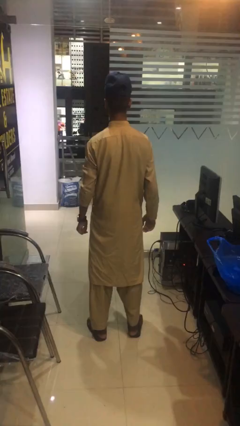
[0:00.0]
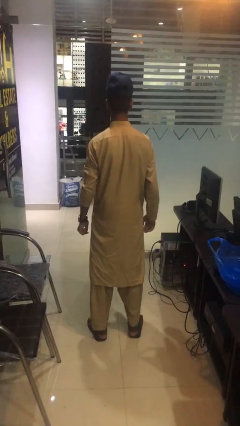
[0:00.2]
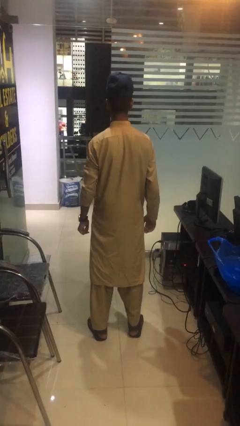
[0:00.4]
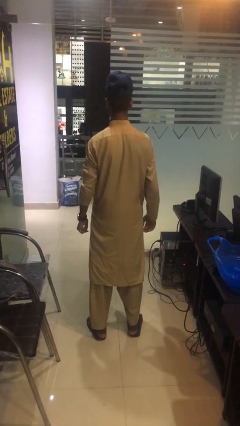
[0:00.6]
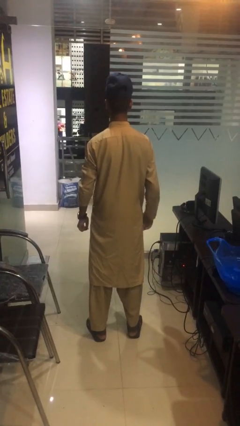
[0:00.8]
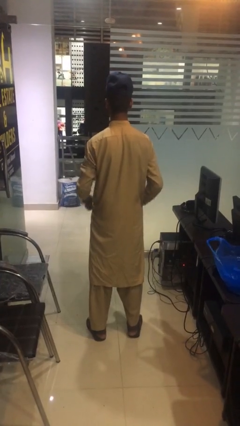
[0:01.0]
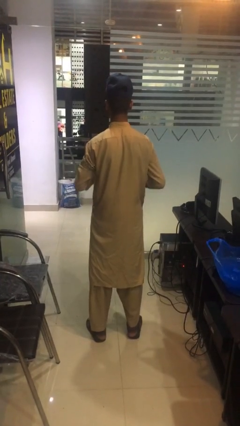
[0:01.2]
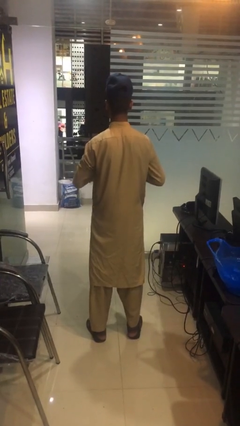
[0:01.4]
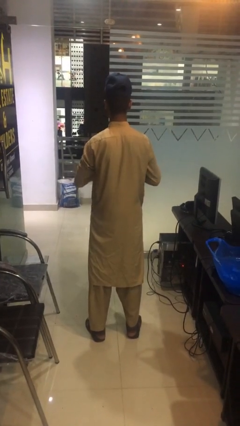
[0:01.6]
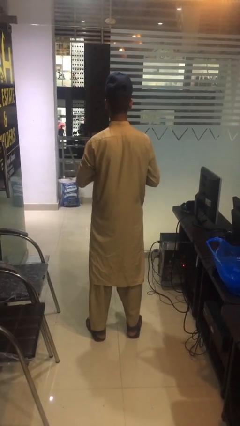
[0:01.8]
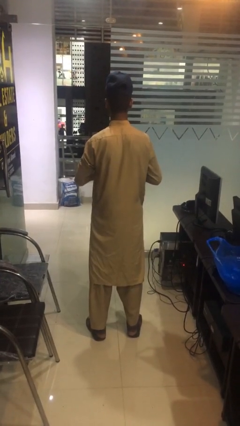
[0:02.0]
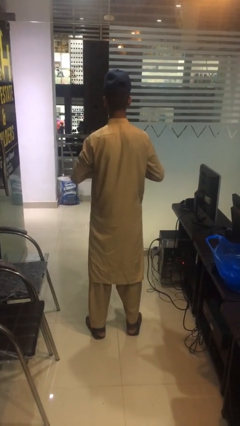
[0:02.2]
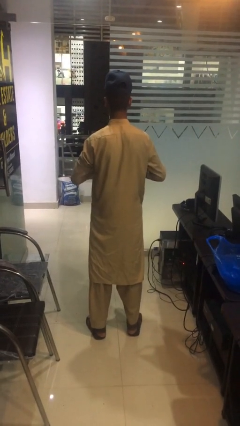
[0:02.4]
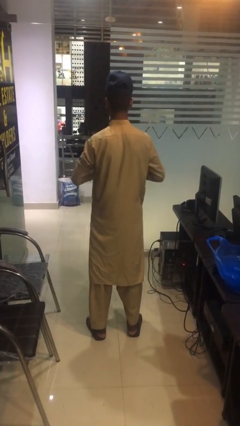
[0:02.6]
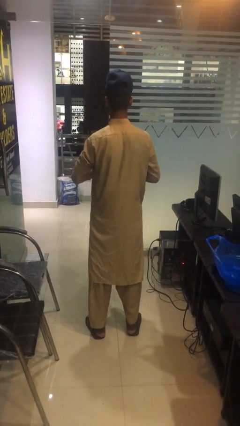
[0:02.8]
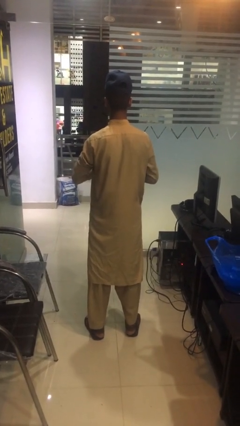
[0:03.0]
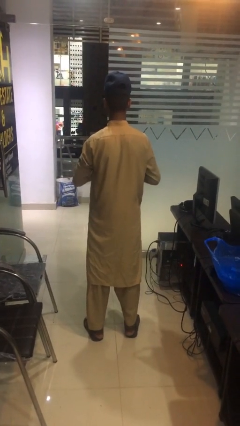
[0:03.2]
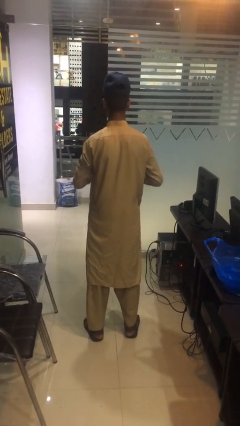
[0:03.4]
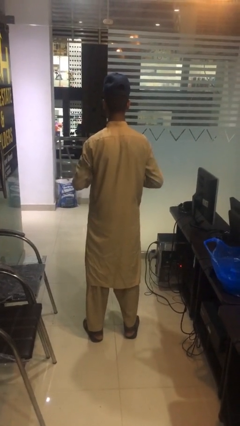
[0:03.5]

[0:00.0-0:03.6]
person cracks knuckles

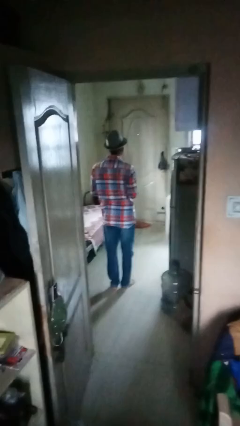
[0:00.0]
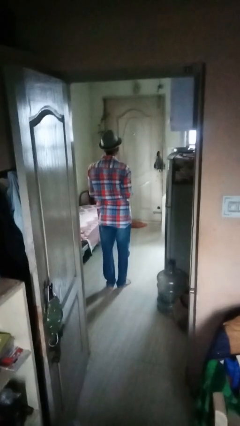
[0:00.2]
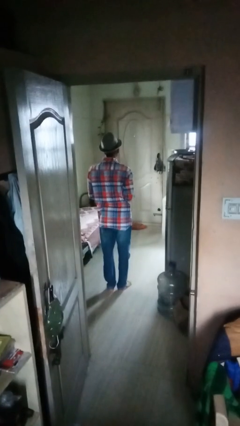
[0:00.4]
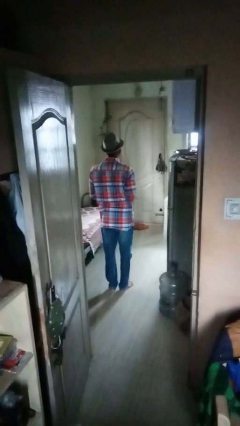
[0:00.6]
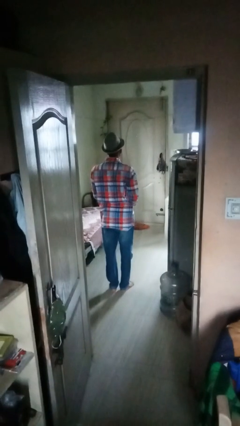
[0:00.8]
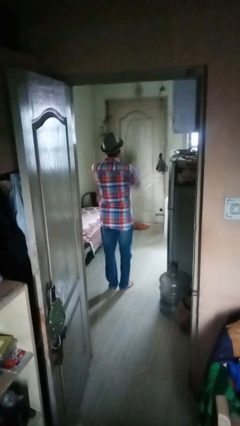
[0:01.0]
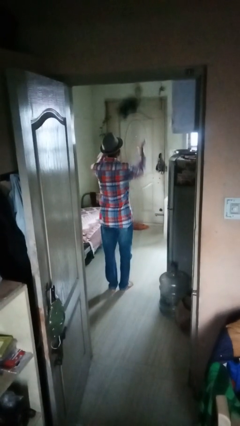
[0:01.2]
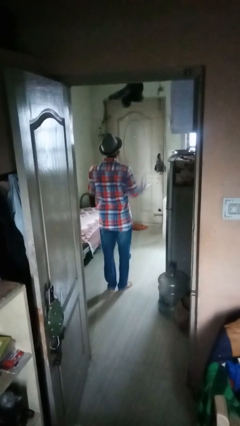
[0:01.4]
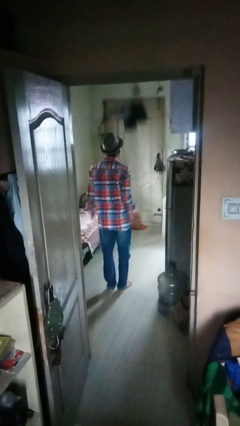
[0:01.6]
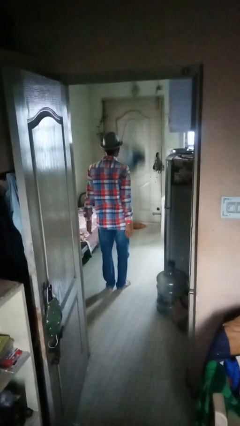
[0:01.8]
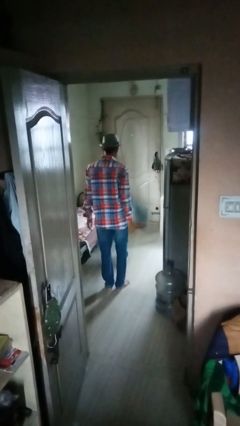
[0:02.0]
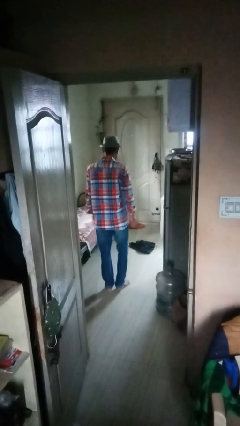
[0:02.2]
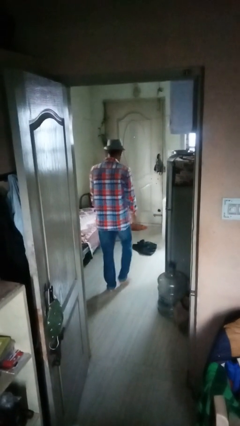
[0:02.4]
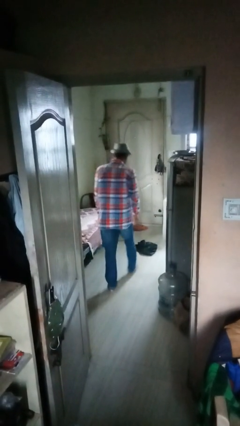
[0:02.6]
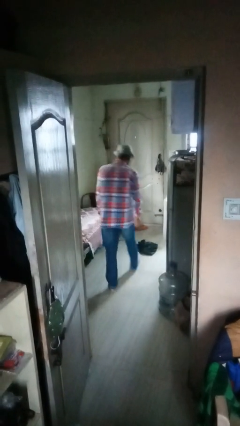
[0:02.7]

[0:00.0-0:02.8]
person throws object into air

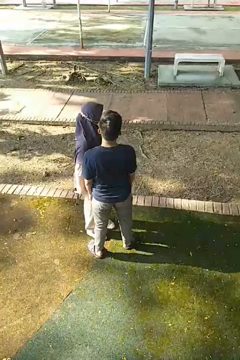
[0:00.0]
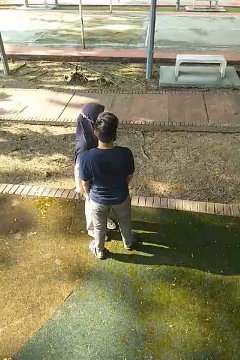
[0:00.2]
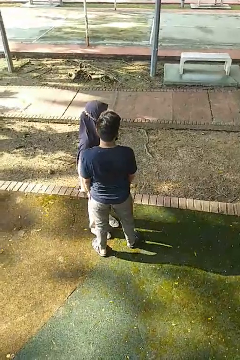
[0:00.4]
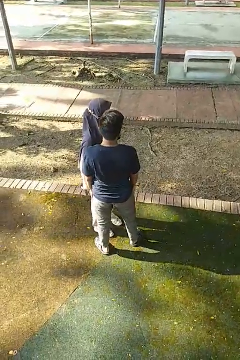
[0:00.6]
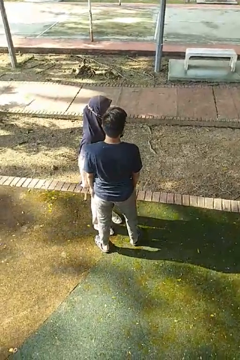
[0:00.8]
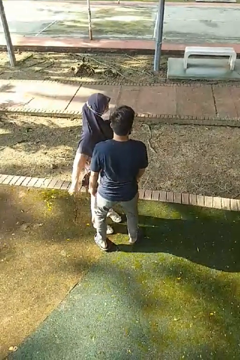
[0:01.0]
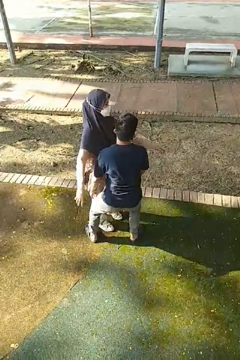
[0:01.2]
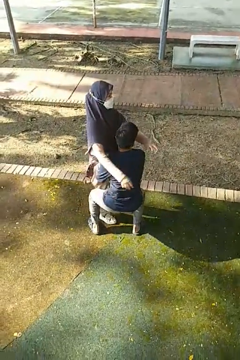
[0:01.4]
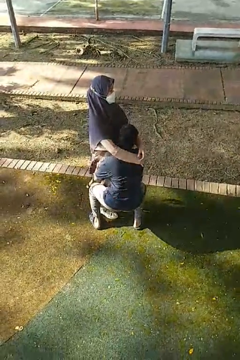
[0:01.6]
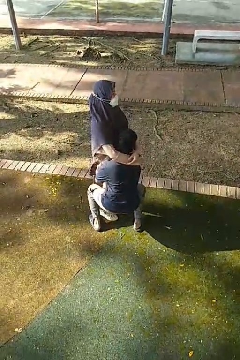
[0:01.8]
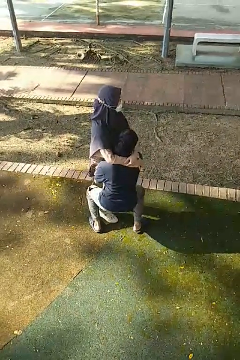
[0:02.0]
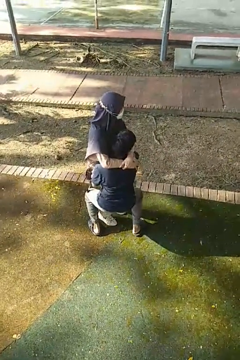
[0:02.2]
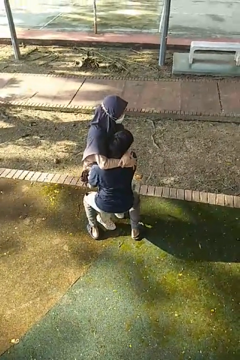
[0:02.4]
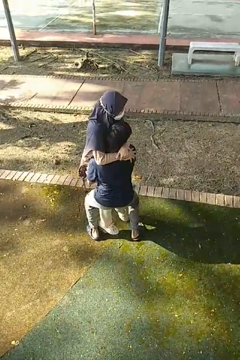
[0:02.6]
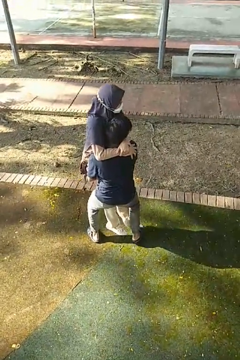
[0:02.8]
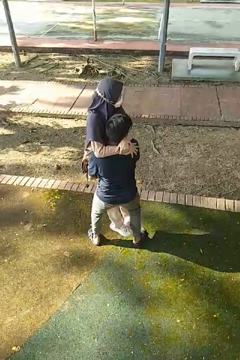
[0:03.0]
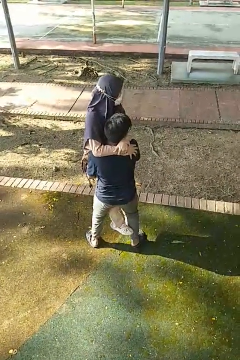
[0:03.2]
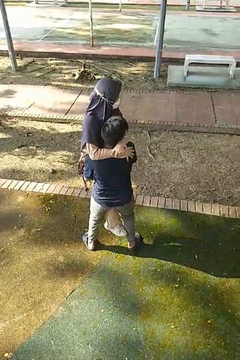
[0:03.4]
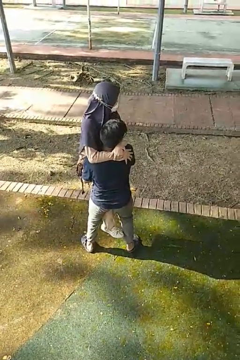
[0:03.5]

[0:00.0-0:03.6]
person picks up person

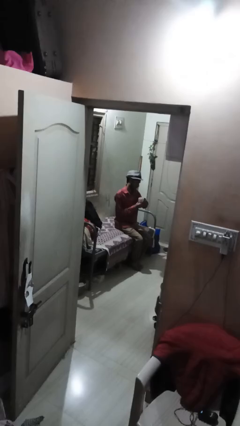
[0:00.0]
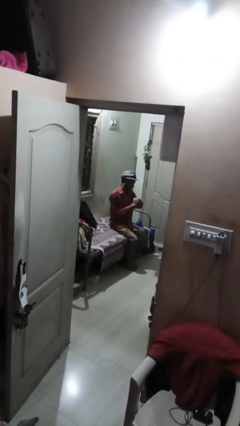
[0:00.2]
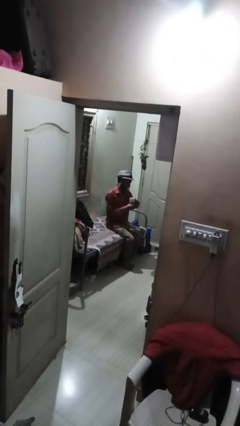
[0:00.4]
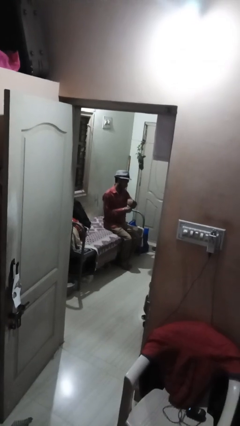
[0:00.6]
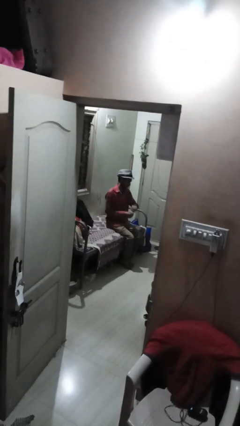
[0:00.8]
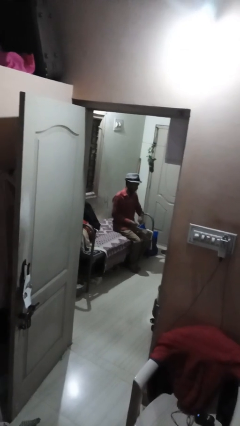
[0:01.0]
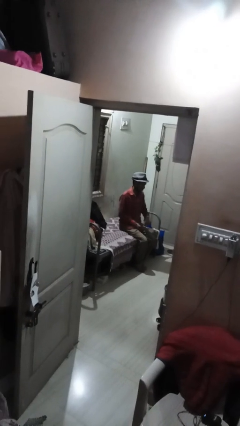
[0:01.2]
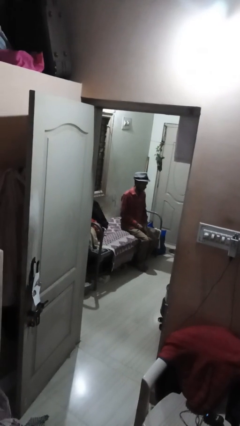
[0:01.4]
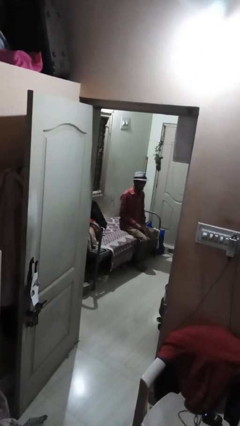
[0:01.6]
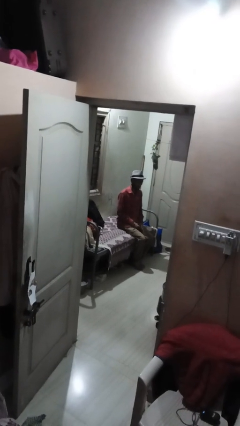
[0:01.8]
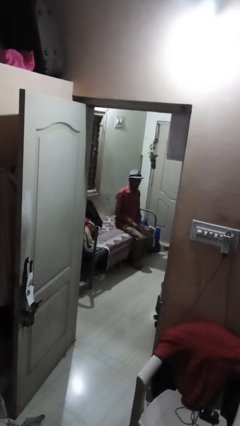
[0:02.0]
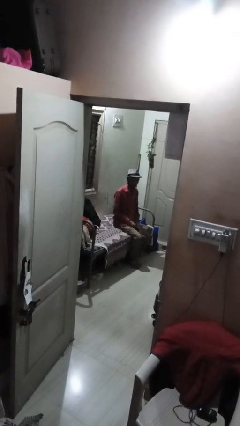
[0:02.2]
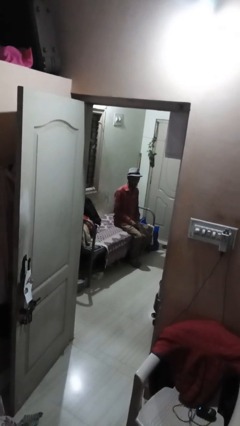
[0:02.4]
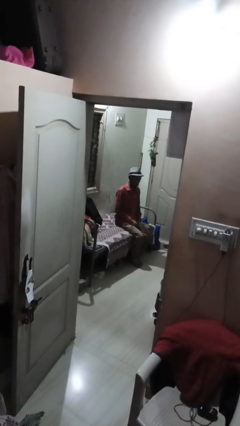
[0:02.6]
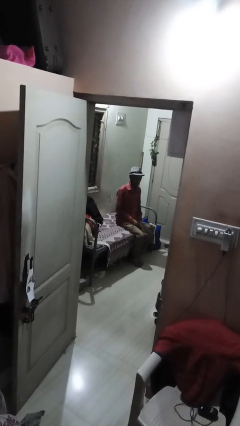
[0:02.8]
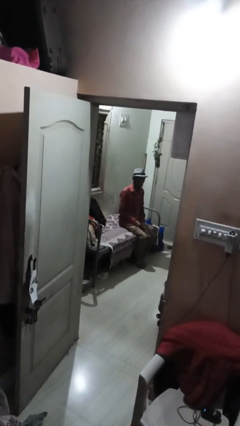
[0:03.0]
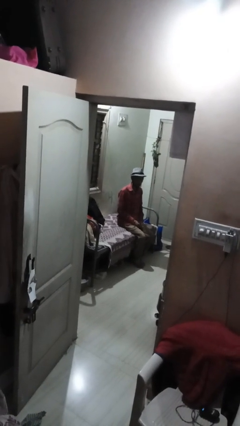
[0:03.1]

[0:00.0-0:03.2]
person looks at wristwatch

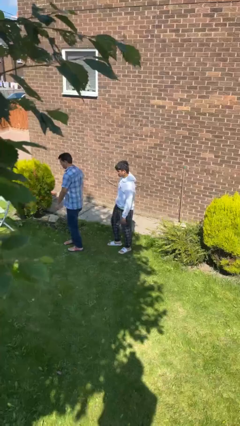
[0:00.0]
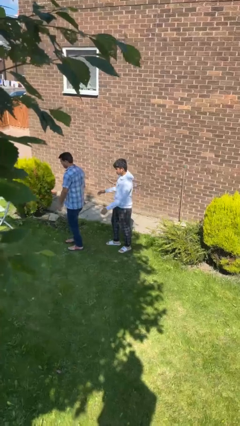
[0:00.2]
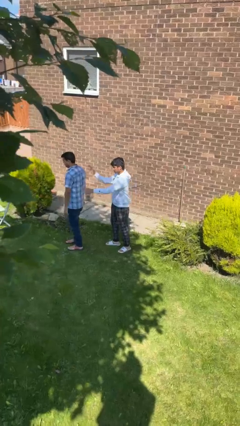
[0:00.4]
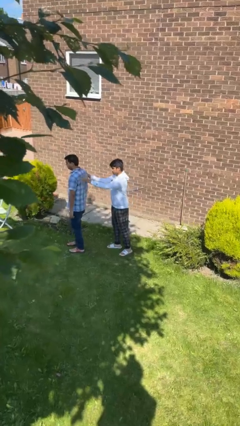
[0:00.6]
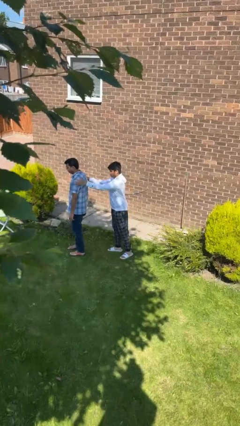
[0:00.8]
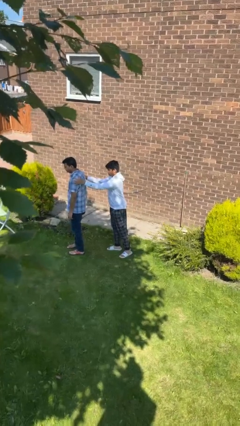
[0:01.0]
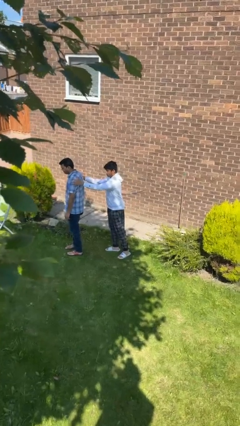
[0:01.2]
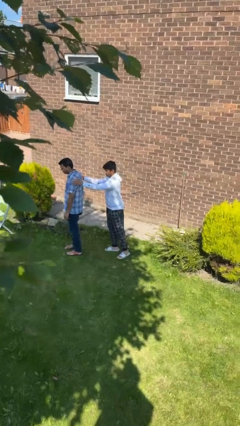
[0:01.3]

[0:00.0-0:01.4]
person grabs person by shoulder

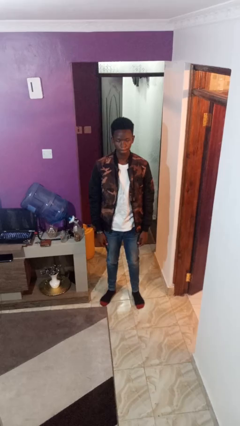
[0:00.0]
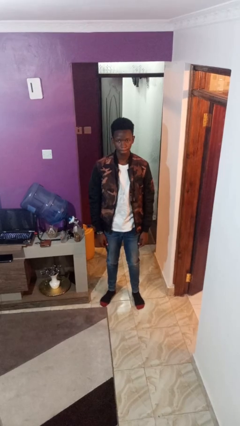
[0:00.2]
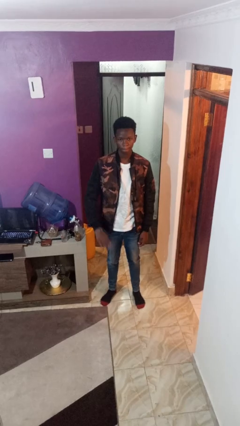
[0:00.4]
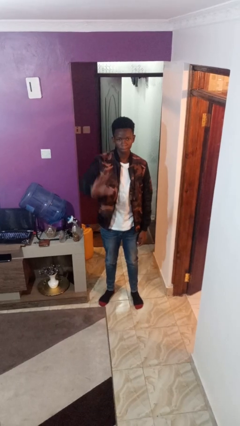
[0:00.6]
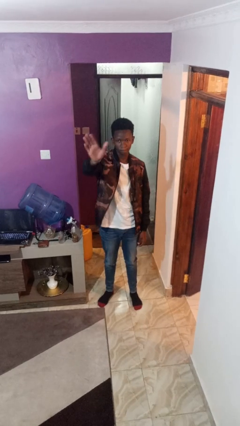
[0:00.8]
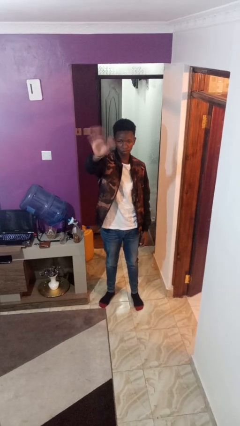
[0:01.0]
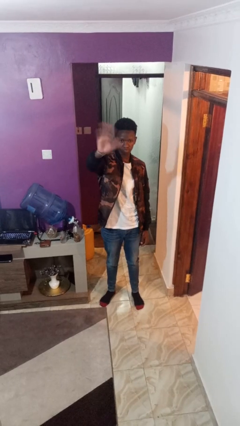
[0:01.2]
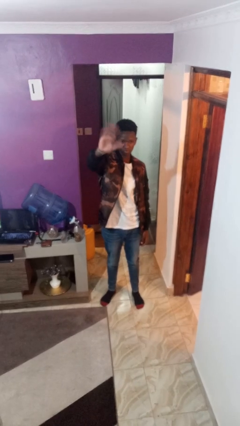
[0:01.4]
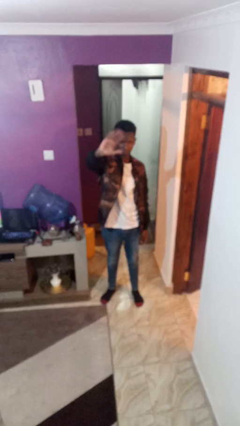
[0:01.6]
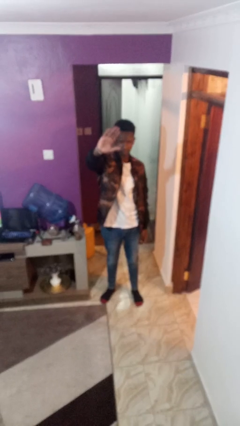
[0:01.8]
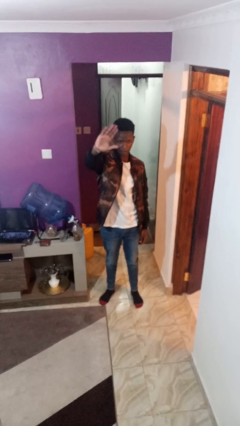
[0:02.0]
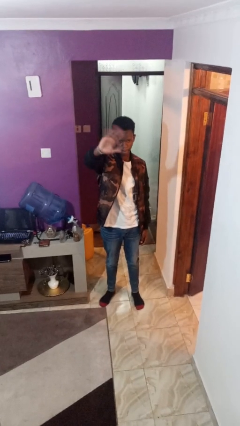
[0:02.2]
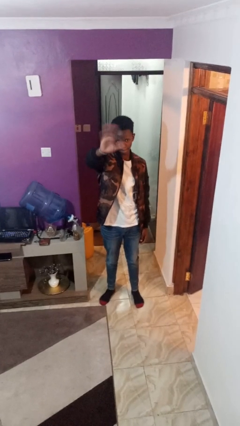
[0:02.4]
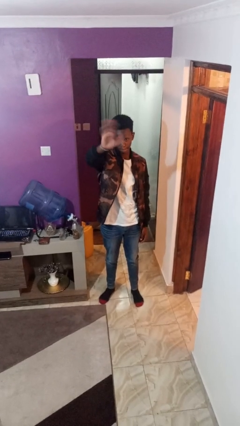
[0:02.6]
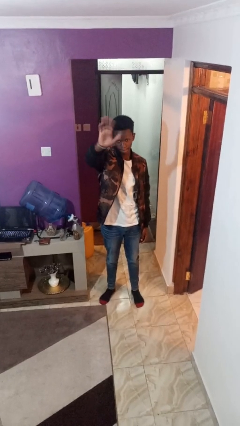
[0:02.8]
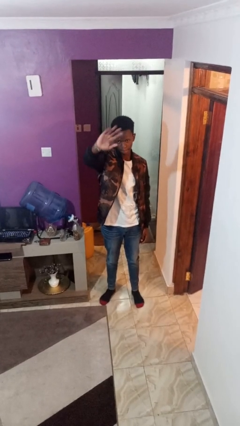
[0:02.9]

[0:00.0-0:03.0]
person waves at person

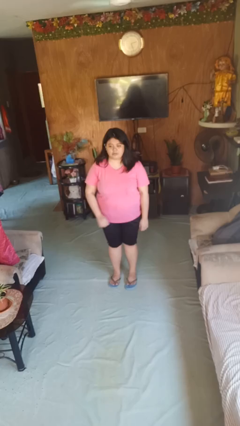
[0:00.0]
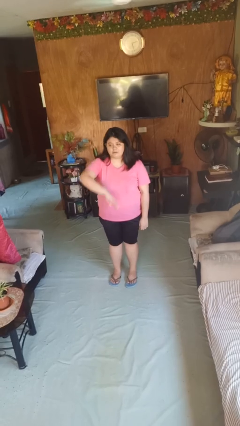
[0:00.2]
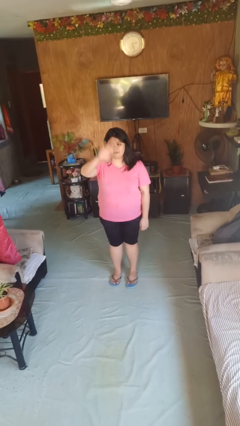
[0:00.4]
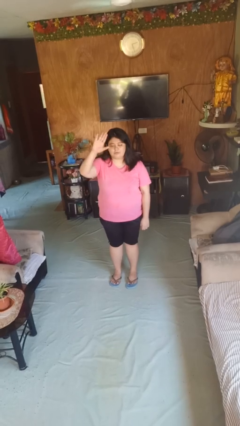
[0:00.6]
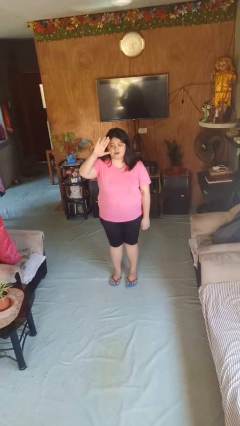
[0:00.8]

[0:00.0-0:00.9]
person gestures swipe up
